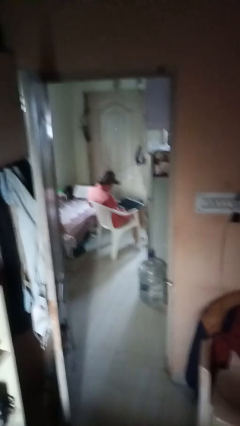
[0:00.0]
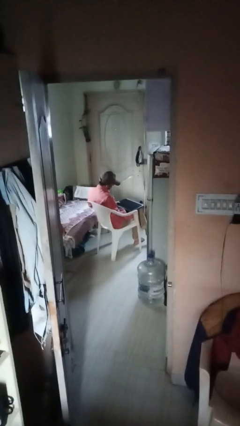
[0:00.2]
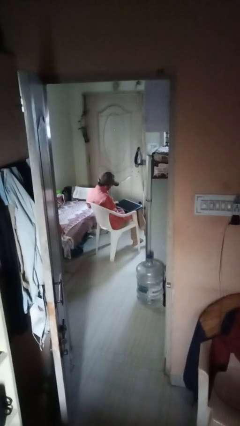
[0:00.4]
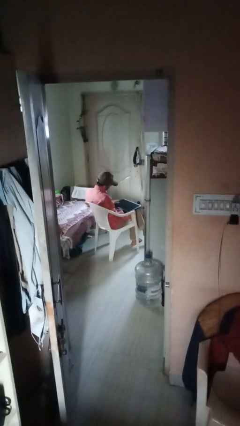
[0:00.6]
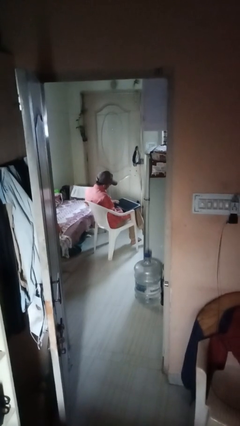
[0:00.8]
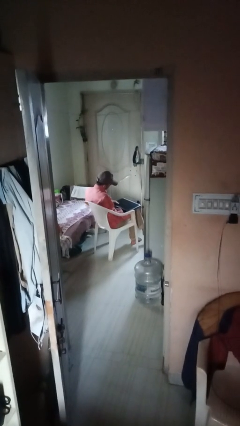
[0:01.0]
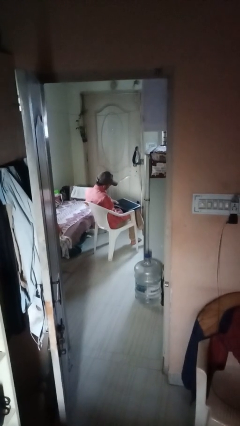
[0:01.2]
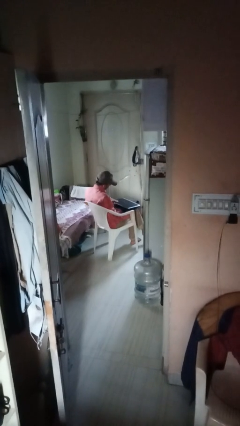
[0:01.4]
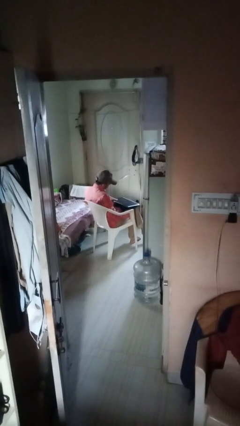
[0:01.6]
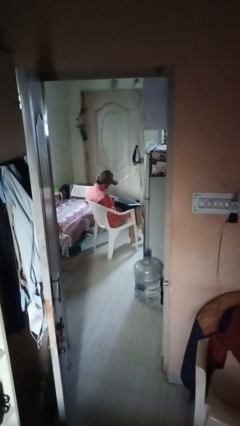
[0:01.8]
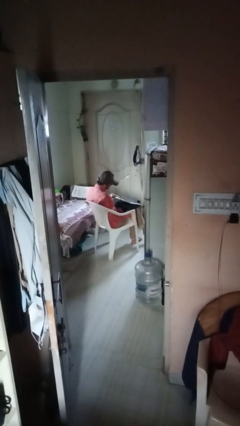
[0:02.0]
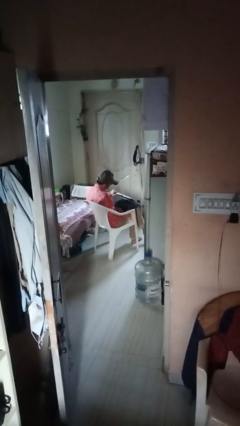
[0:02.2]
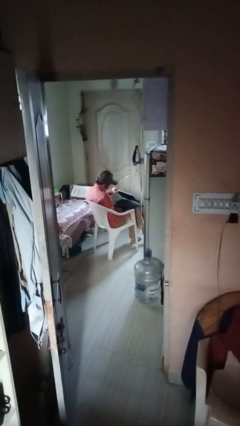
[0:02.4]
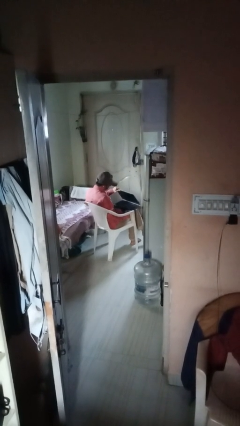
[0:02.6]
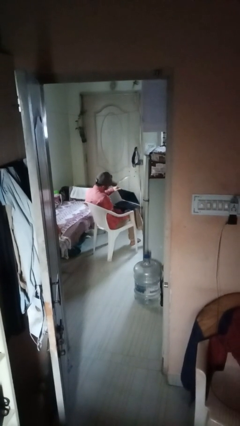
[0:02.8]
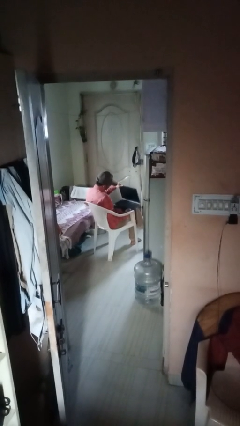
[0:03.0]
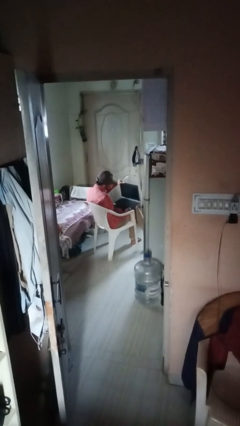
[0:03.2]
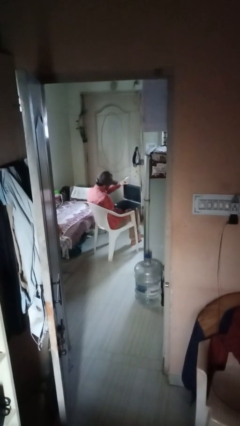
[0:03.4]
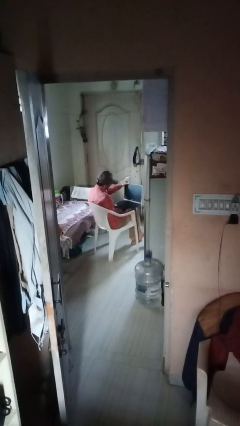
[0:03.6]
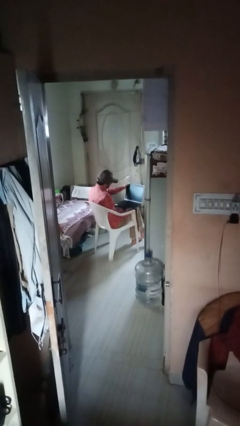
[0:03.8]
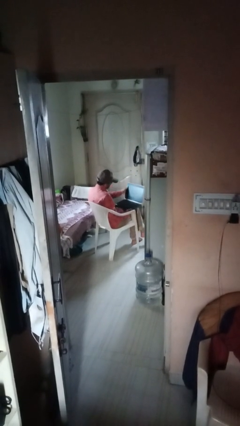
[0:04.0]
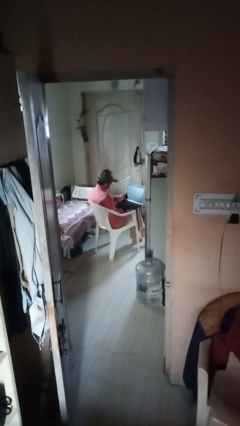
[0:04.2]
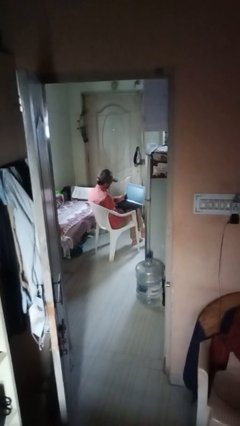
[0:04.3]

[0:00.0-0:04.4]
person opens laptop

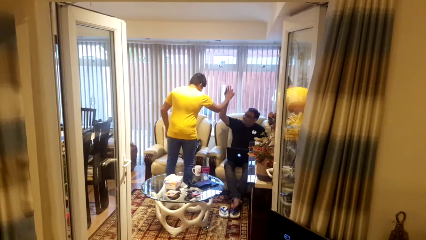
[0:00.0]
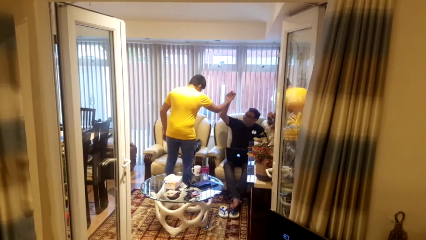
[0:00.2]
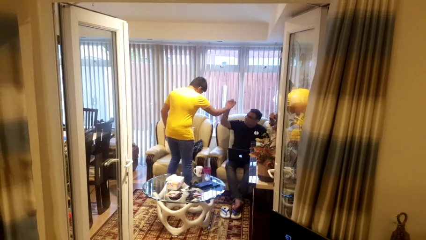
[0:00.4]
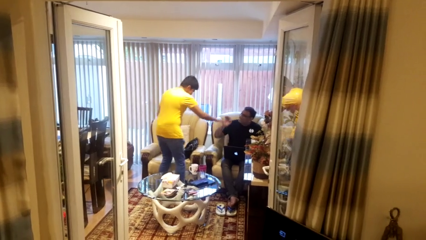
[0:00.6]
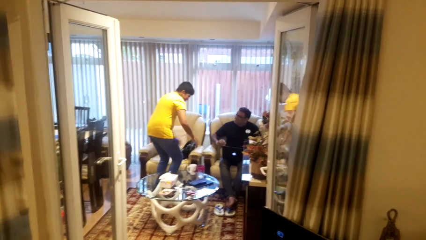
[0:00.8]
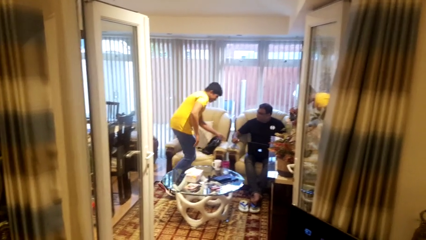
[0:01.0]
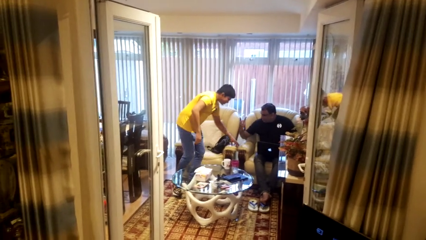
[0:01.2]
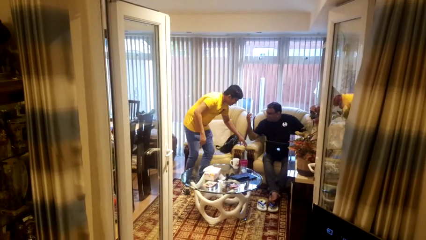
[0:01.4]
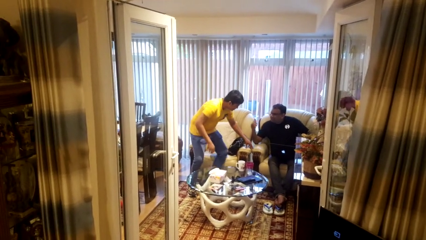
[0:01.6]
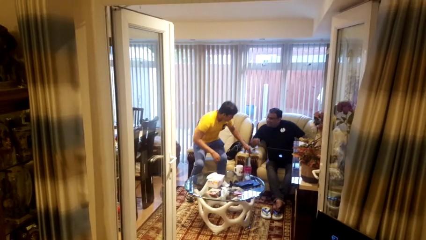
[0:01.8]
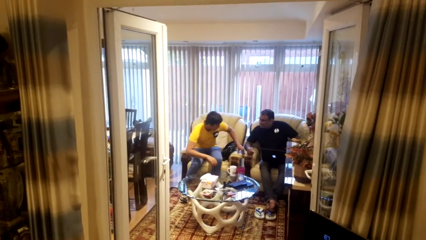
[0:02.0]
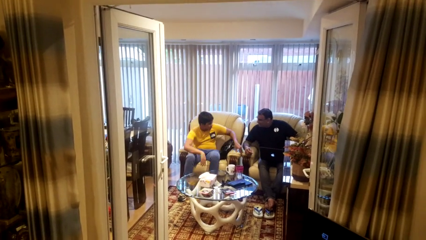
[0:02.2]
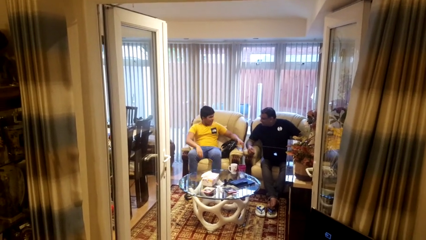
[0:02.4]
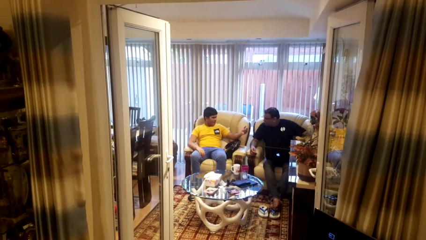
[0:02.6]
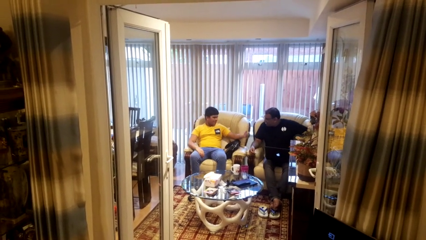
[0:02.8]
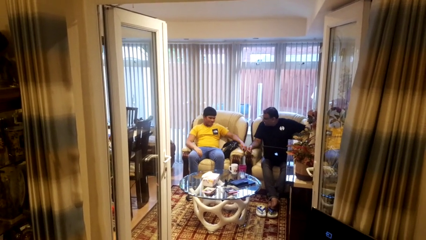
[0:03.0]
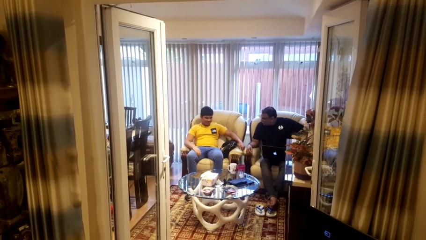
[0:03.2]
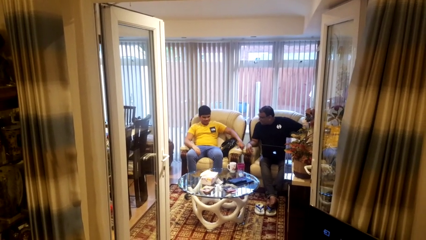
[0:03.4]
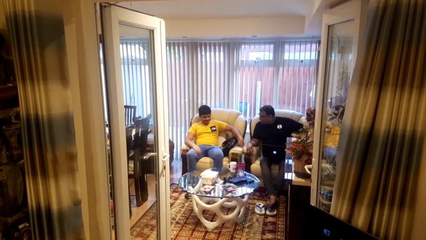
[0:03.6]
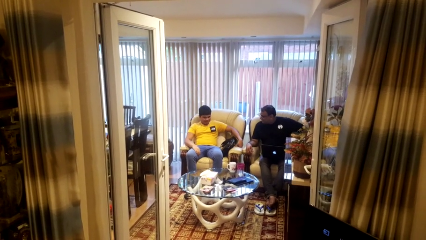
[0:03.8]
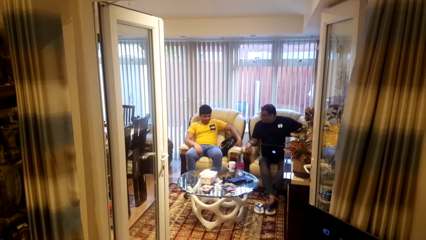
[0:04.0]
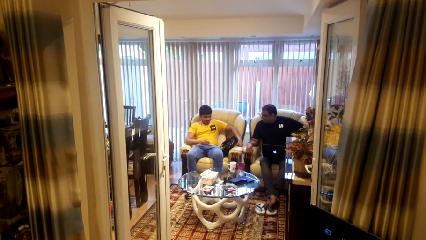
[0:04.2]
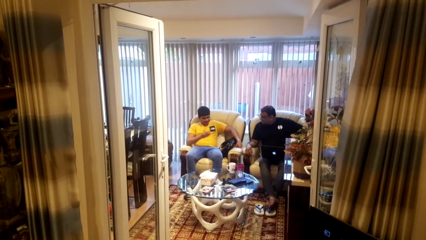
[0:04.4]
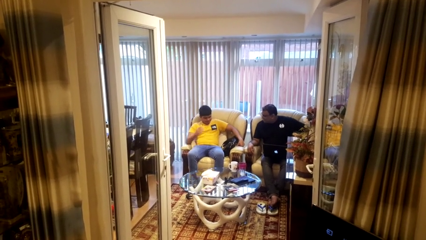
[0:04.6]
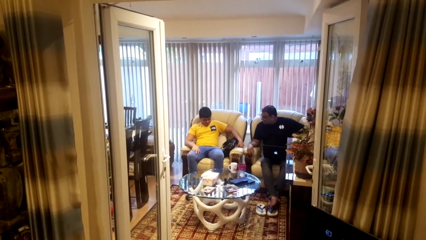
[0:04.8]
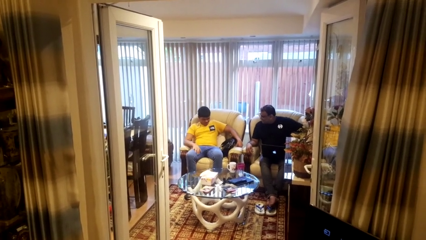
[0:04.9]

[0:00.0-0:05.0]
person highfives hand

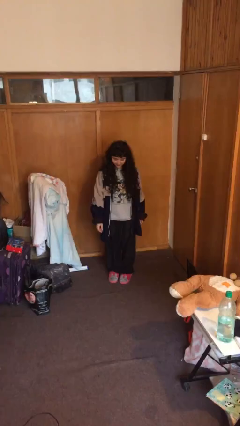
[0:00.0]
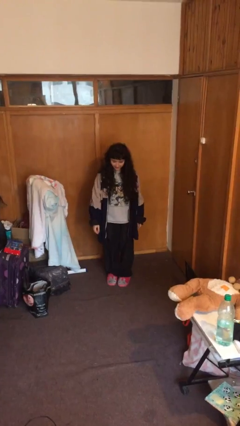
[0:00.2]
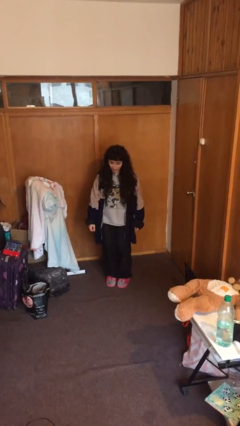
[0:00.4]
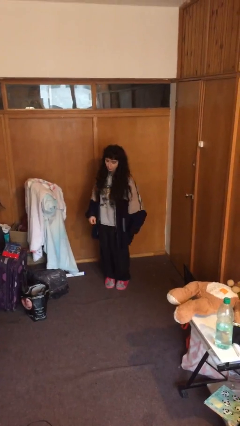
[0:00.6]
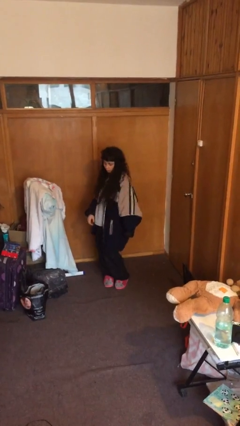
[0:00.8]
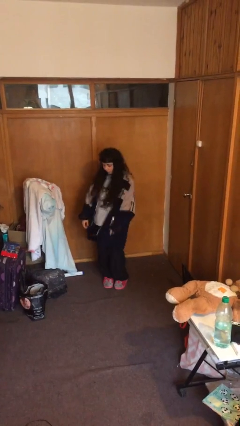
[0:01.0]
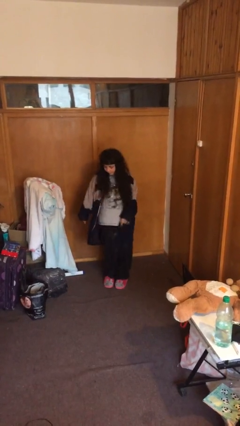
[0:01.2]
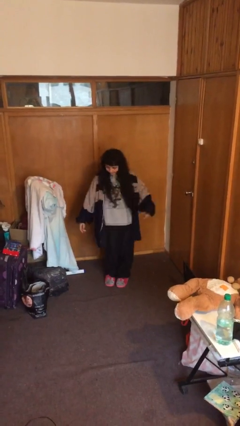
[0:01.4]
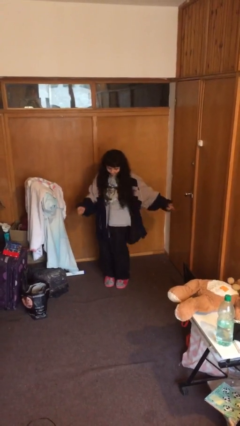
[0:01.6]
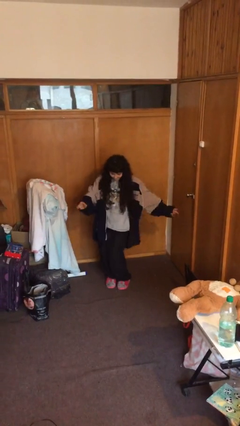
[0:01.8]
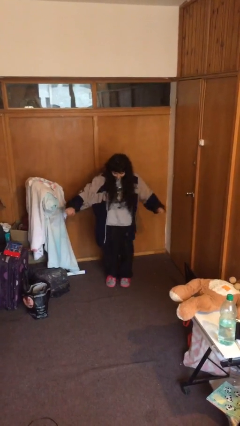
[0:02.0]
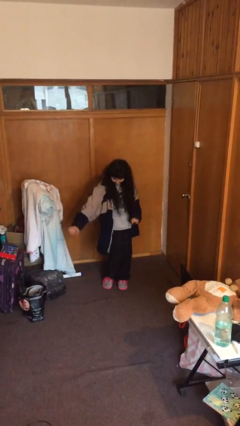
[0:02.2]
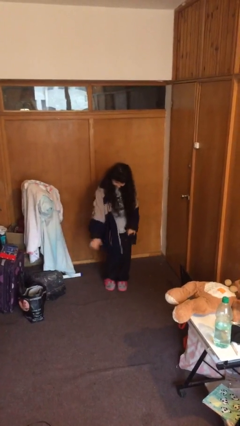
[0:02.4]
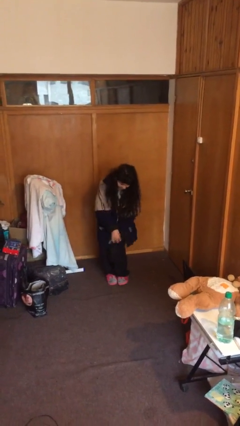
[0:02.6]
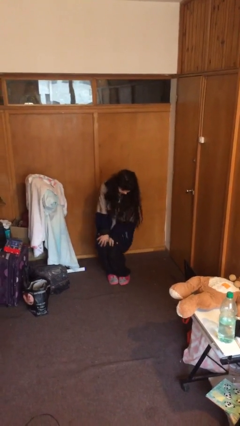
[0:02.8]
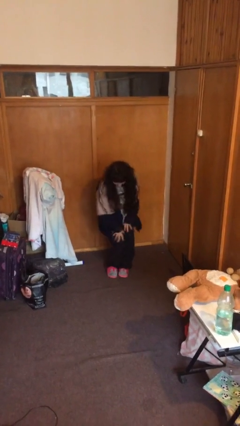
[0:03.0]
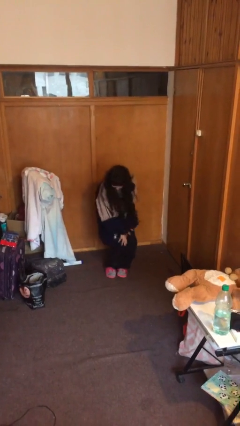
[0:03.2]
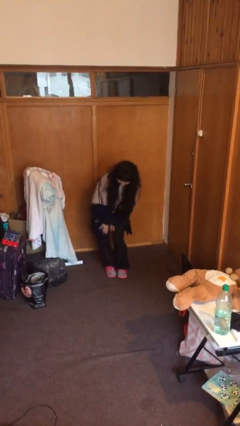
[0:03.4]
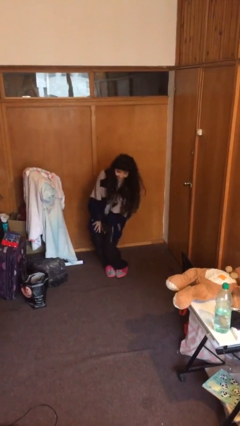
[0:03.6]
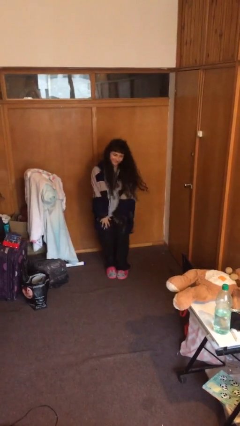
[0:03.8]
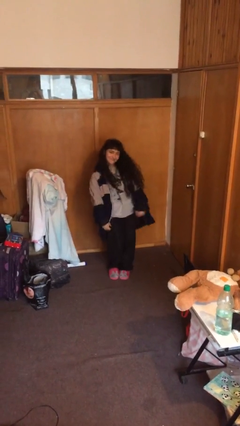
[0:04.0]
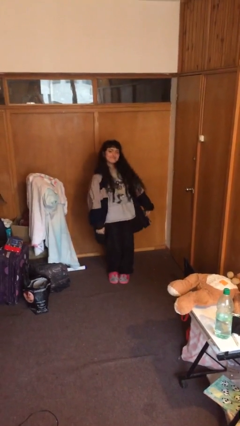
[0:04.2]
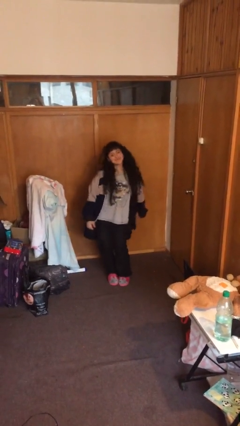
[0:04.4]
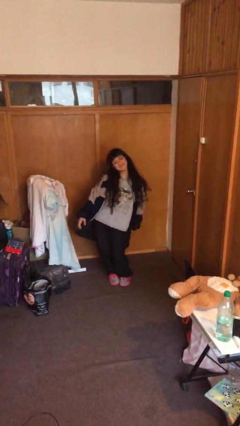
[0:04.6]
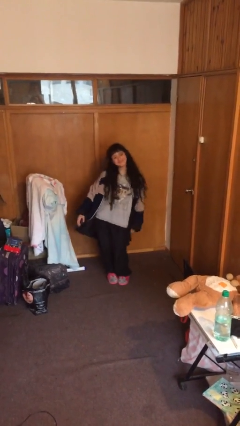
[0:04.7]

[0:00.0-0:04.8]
person dances in place

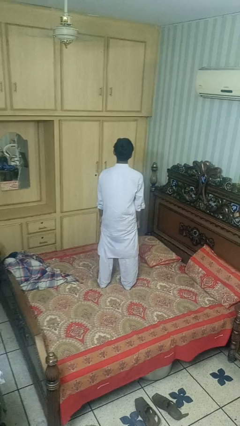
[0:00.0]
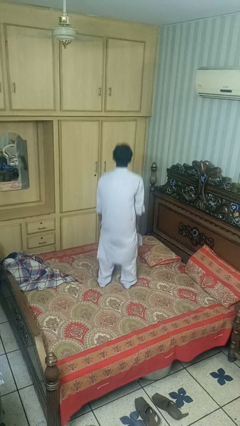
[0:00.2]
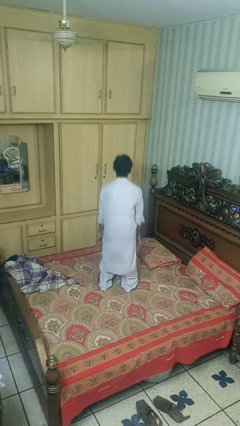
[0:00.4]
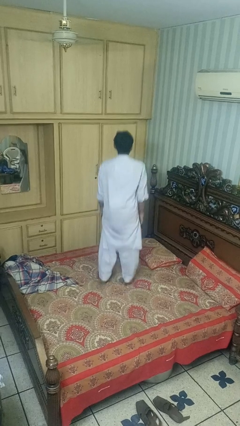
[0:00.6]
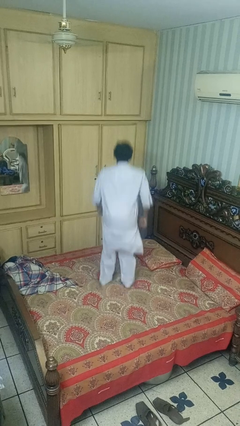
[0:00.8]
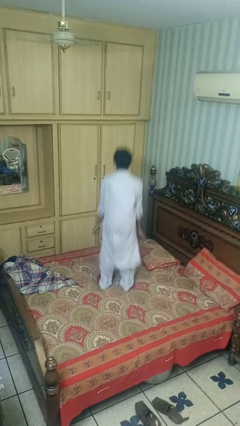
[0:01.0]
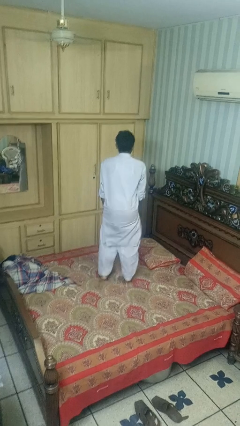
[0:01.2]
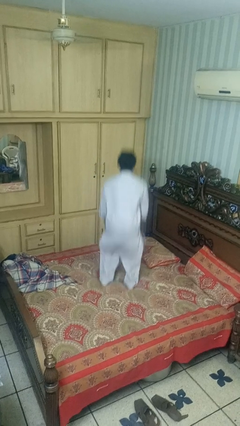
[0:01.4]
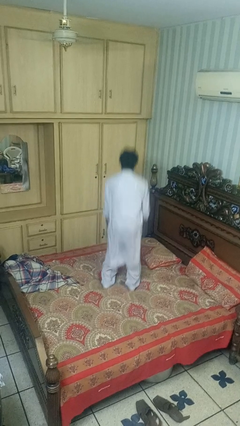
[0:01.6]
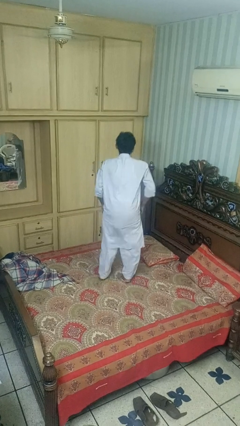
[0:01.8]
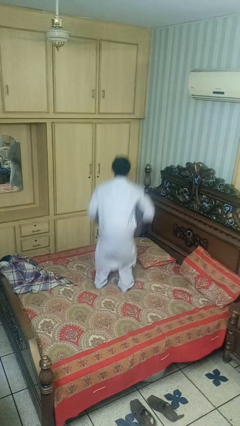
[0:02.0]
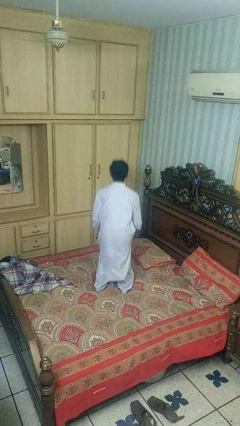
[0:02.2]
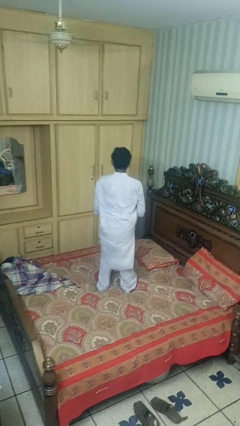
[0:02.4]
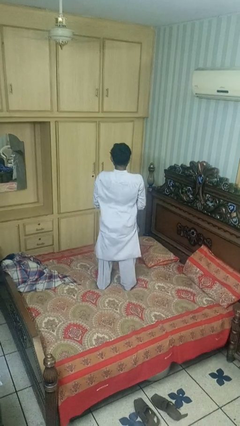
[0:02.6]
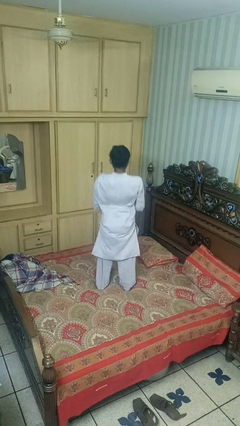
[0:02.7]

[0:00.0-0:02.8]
person jumps on bed

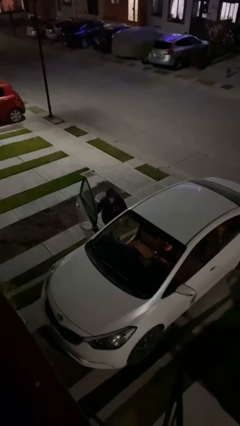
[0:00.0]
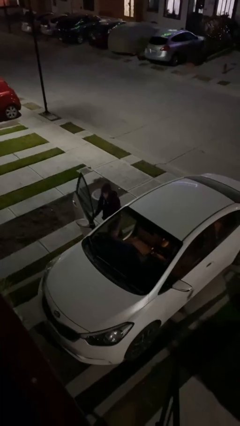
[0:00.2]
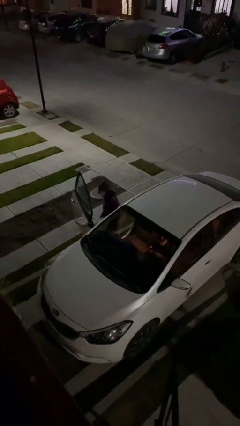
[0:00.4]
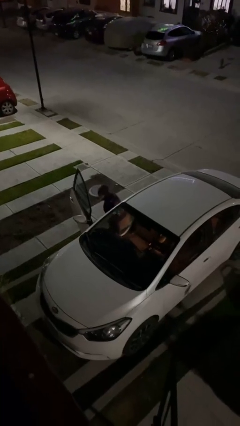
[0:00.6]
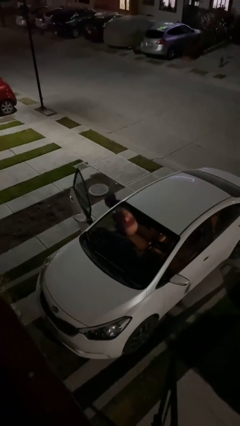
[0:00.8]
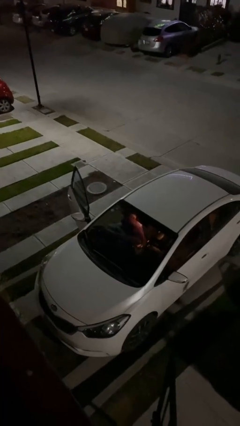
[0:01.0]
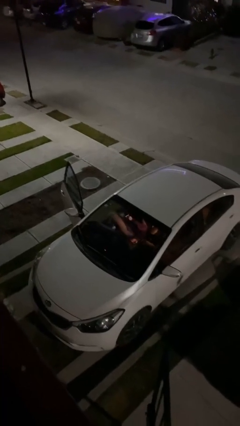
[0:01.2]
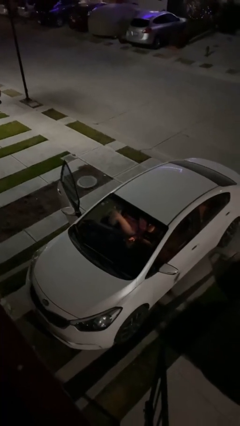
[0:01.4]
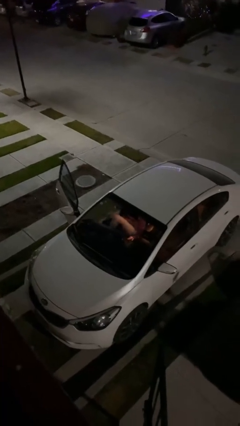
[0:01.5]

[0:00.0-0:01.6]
person enters car
